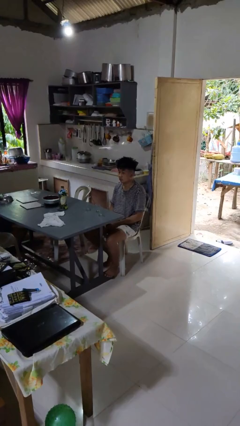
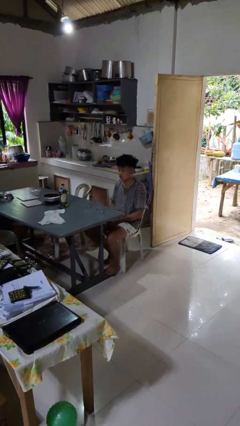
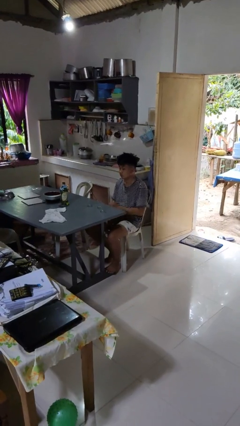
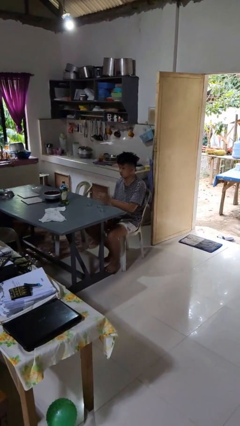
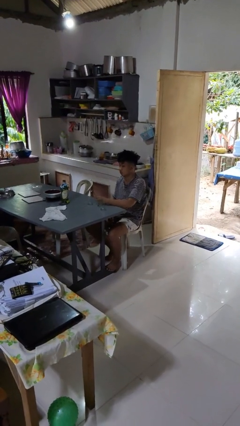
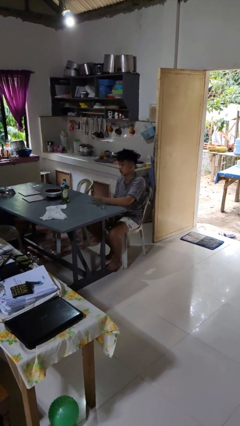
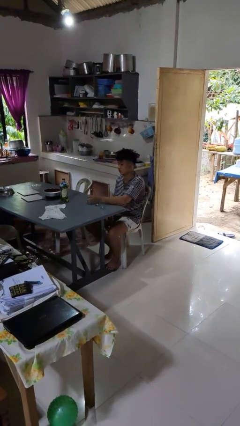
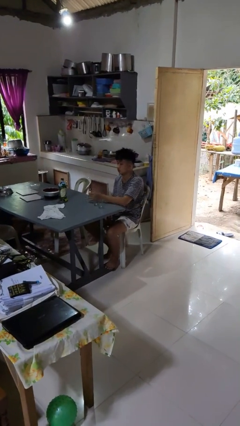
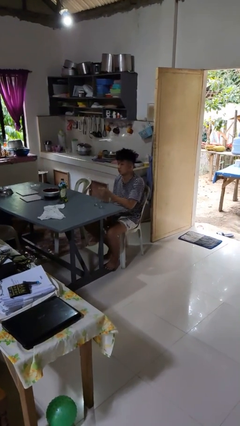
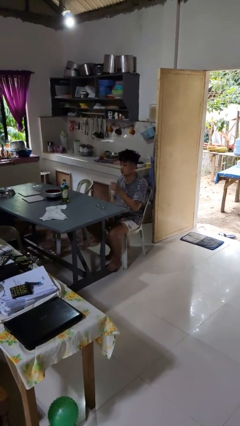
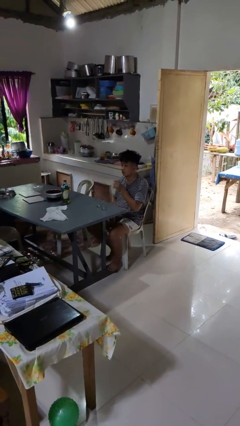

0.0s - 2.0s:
person picks up object from table

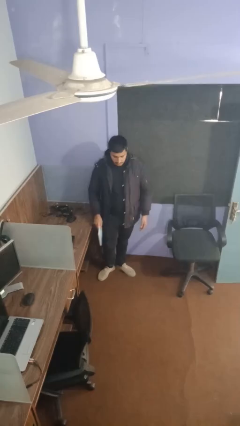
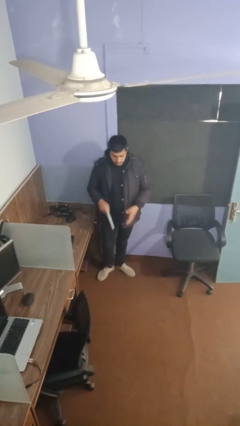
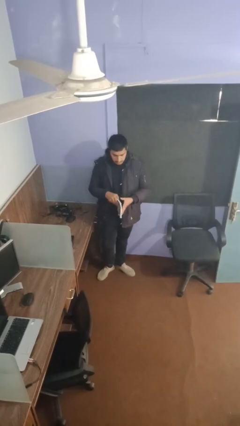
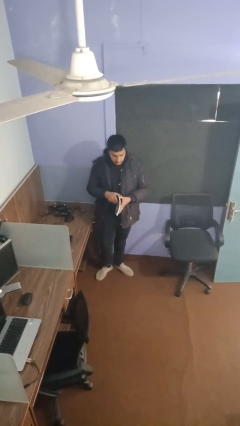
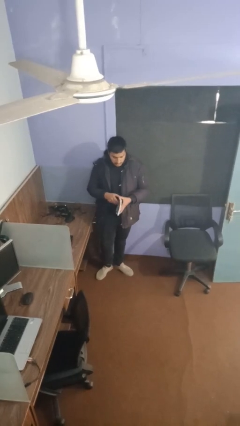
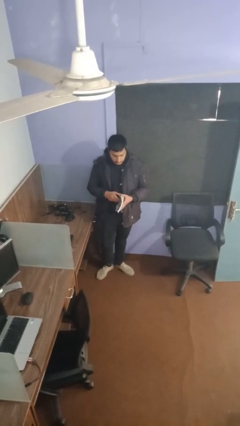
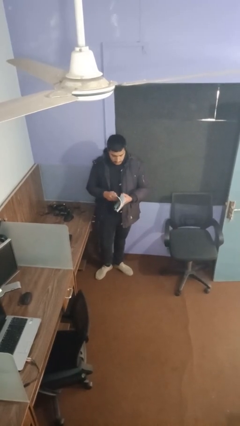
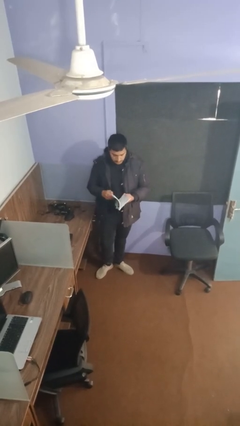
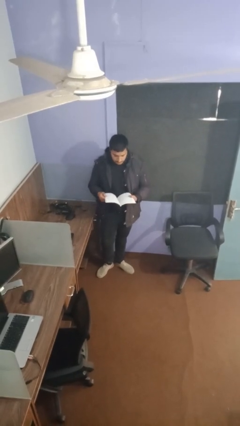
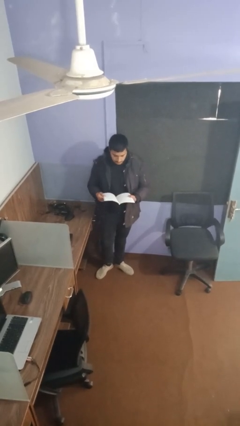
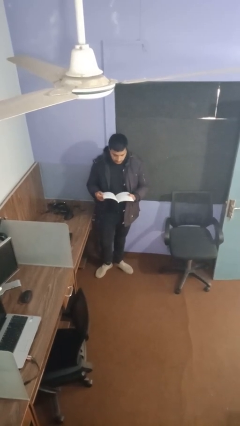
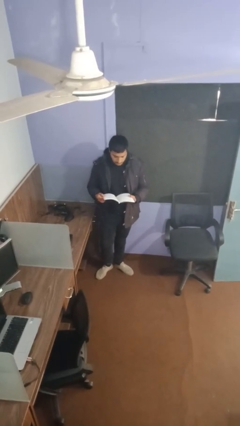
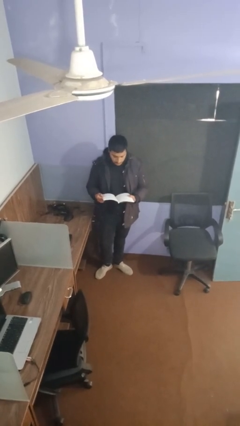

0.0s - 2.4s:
person reads document

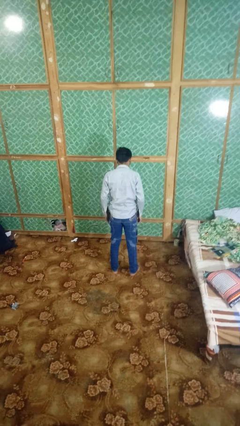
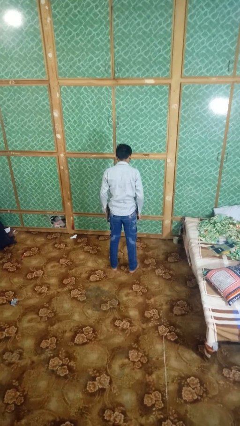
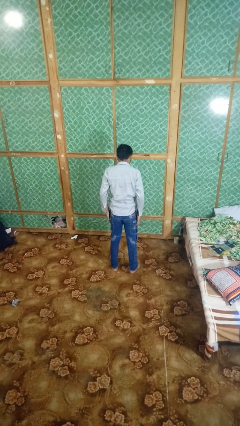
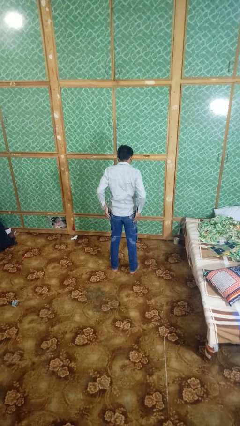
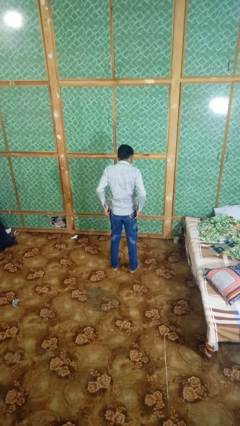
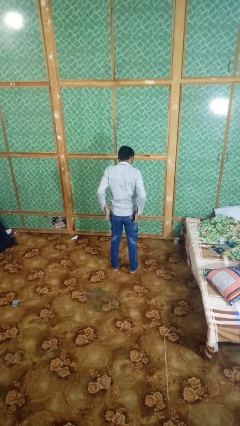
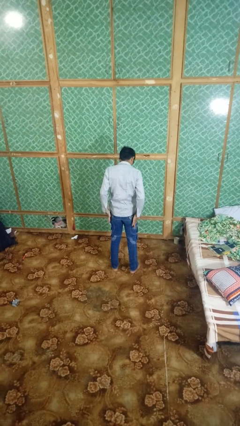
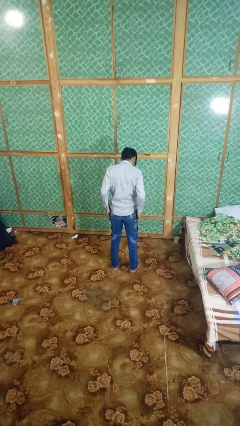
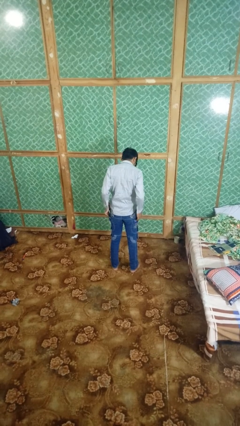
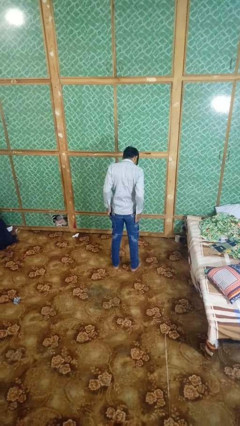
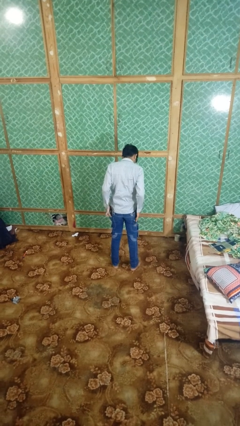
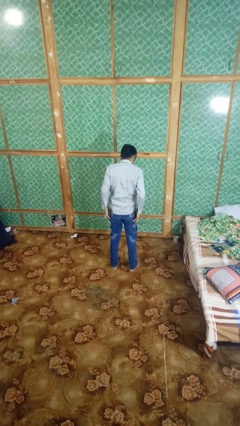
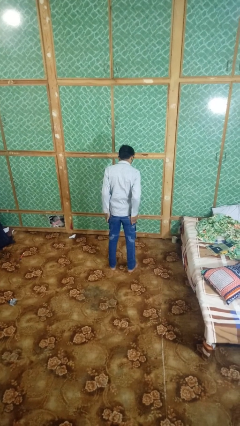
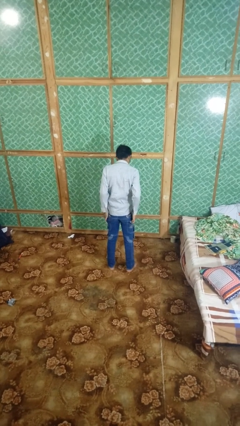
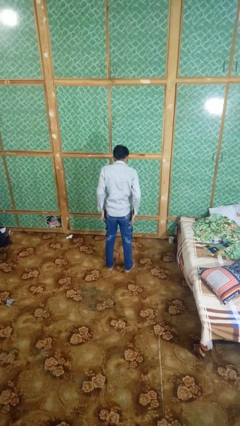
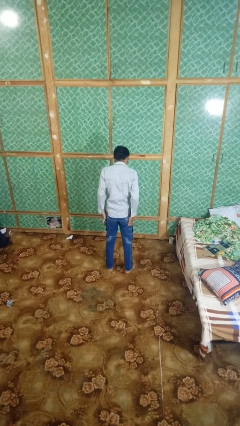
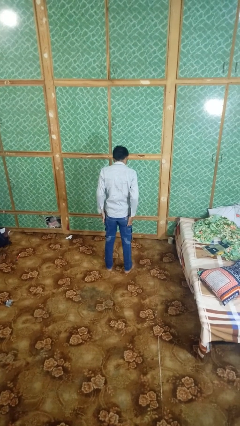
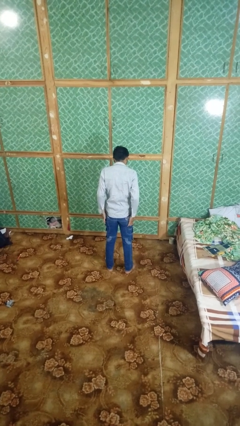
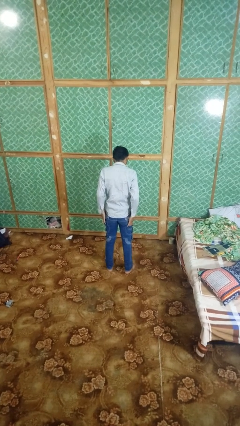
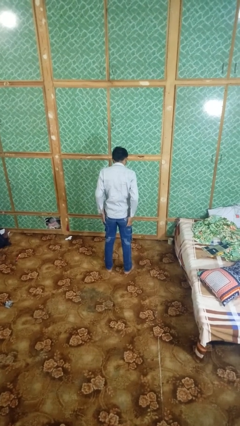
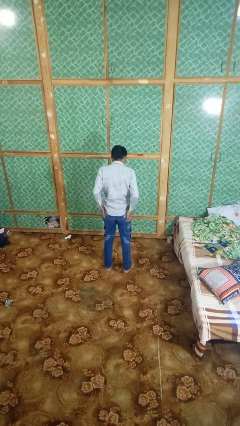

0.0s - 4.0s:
person puts hands in back pockets

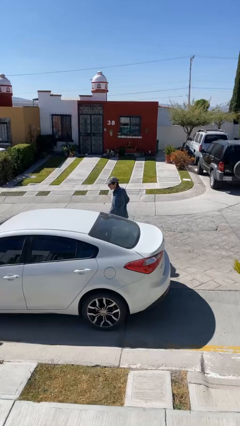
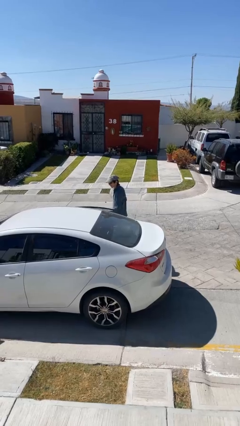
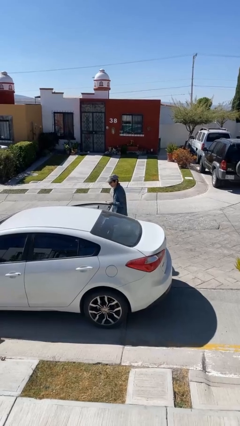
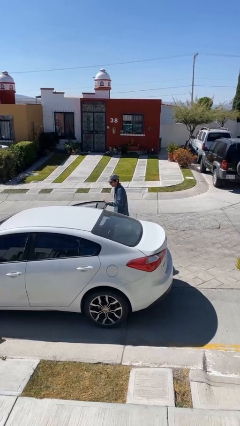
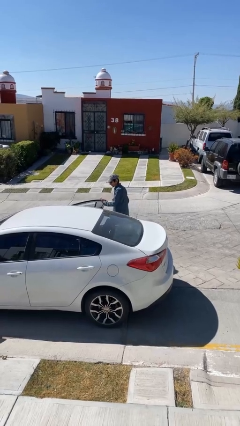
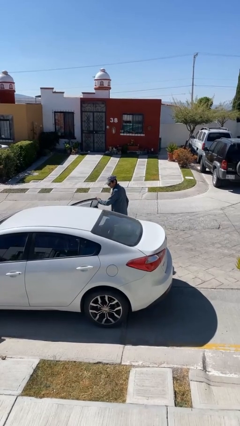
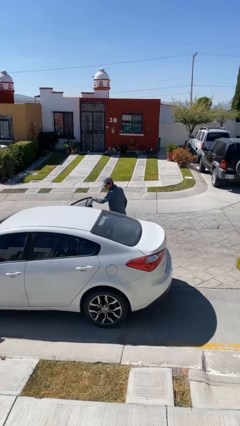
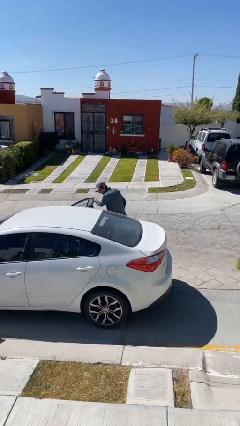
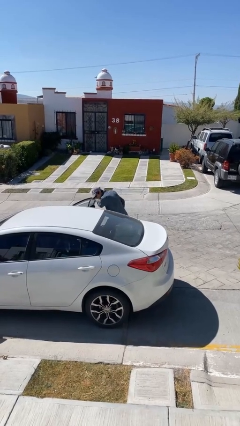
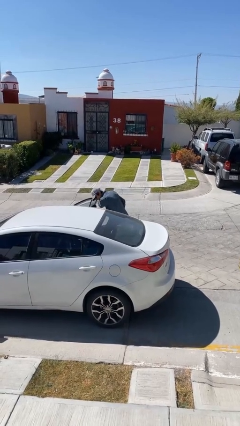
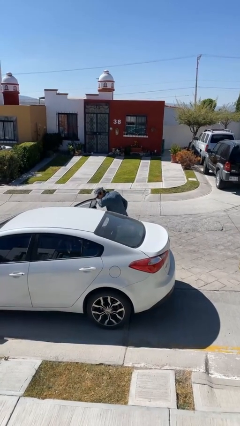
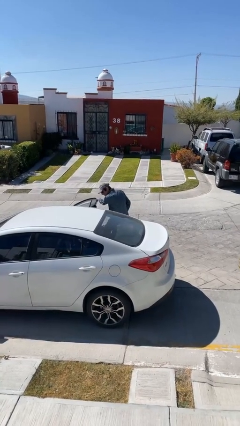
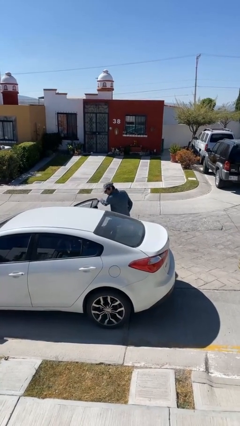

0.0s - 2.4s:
person opens car door

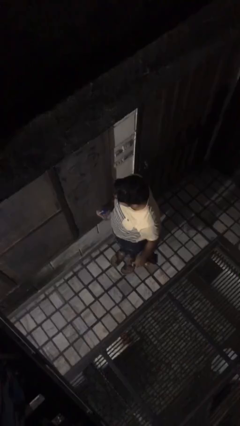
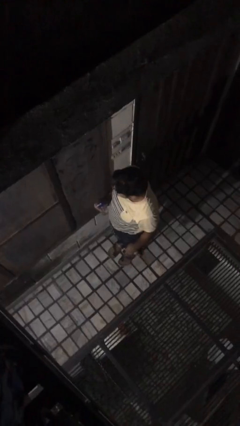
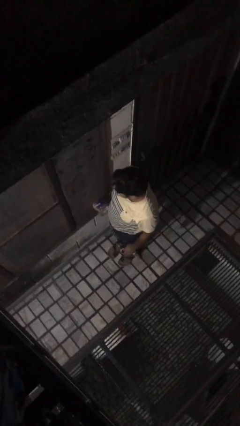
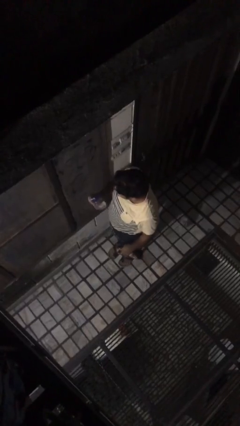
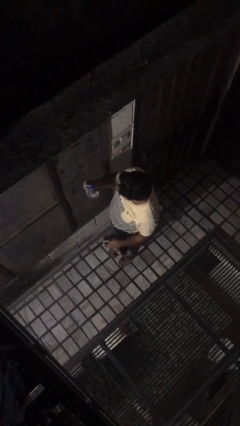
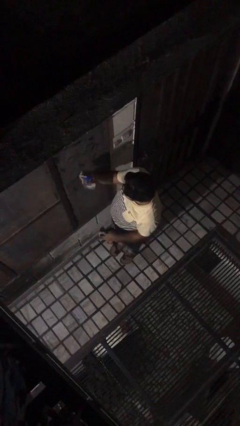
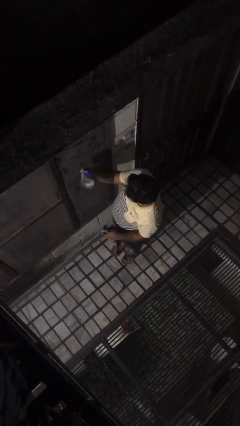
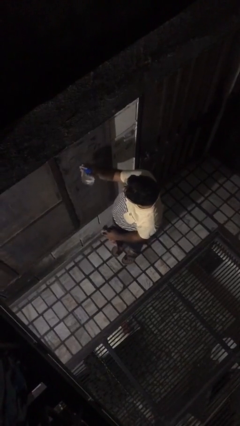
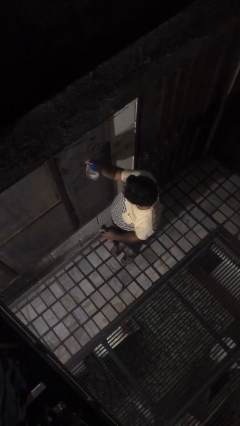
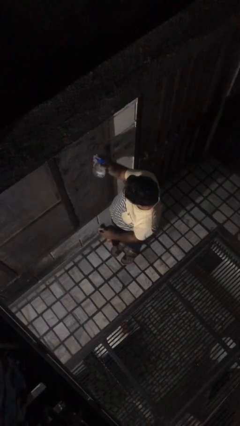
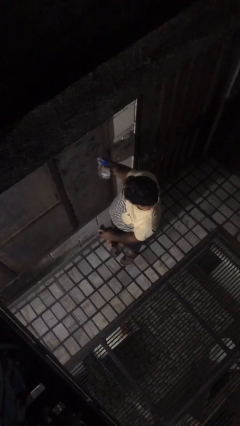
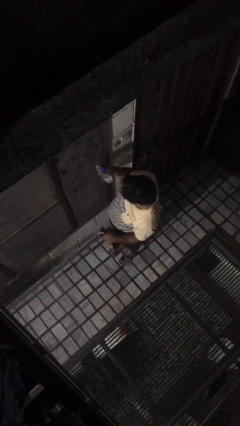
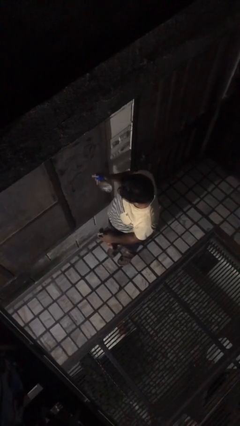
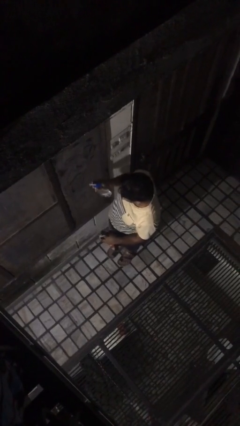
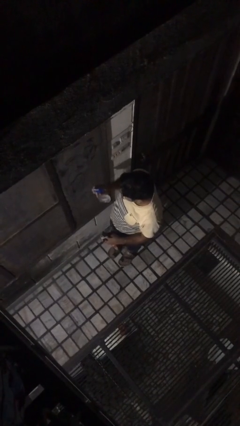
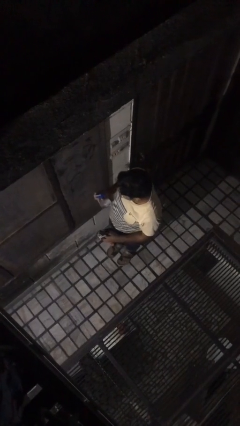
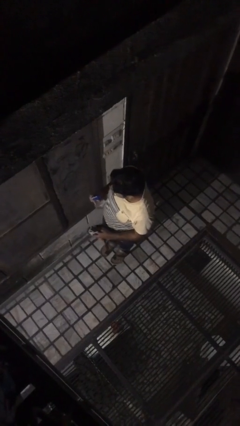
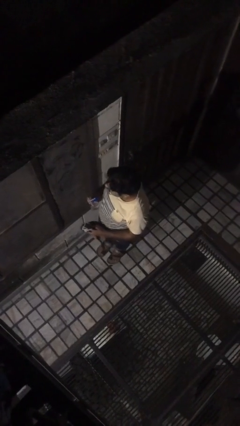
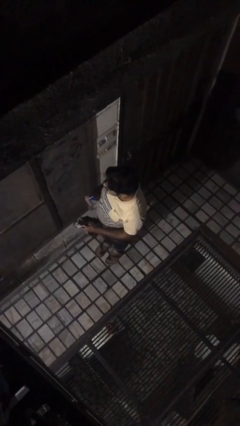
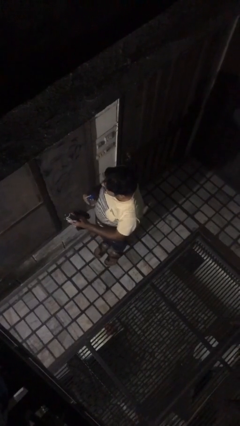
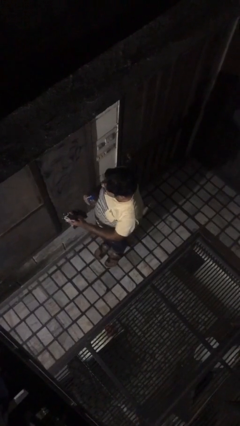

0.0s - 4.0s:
person sprays from bottle

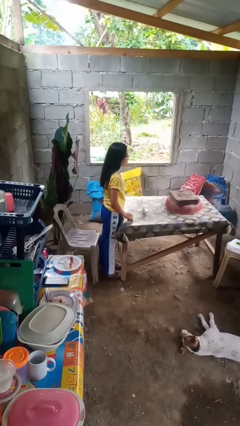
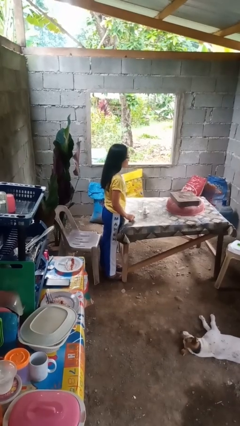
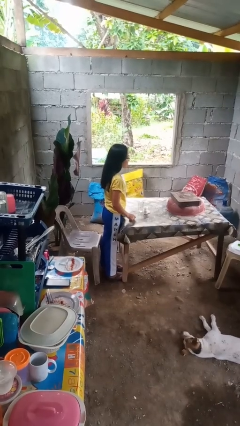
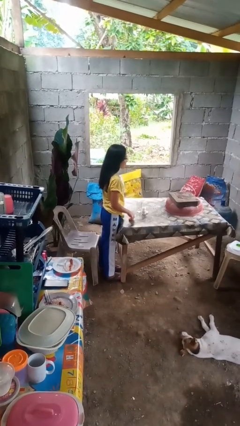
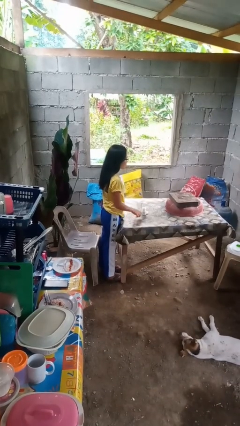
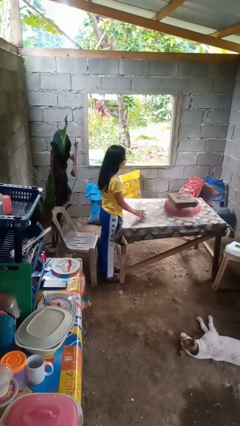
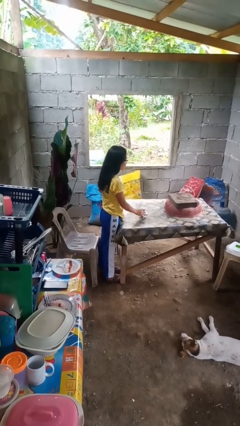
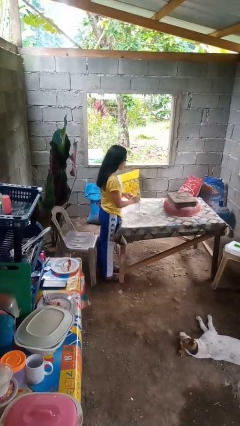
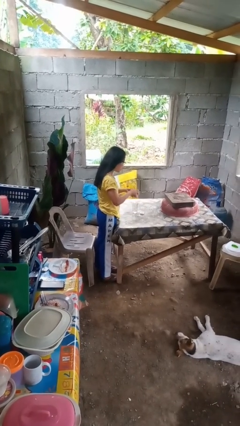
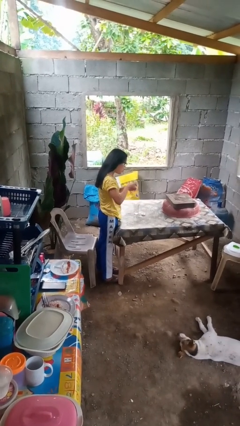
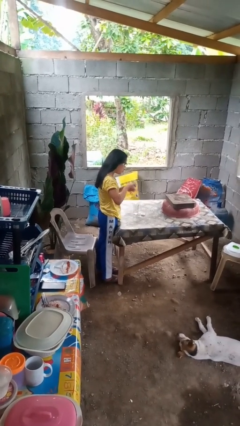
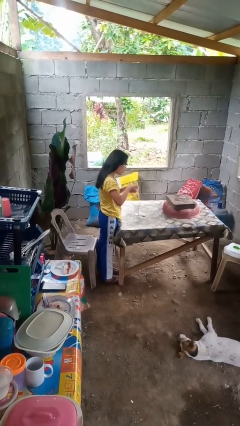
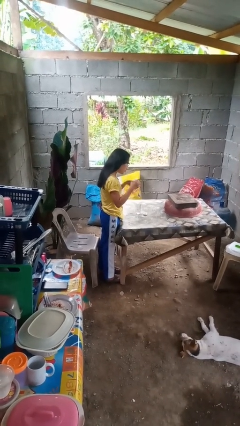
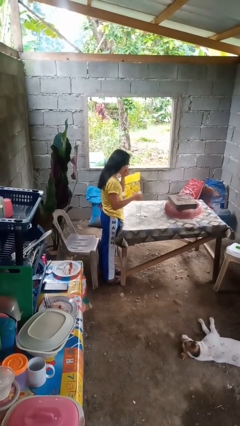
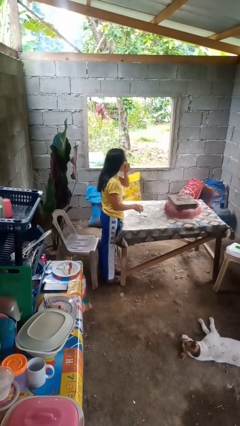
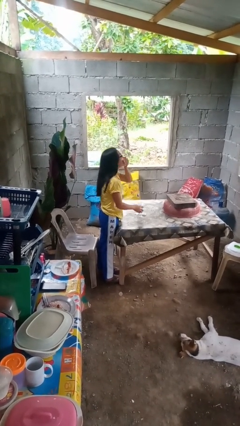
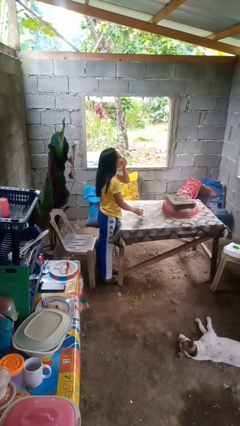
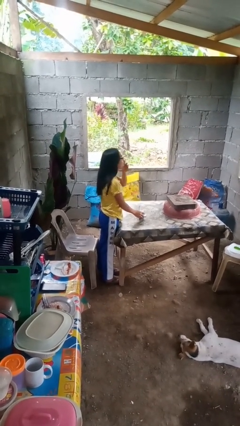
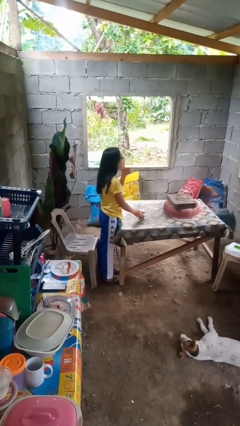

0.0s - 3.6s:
person takes medicine pills
